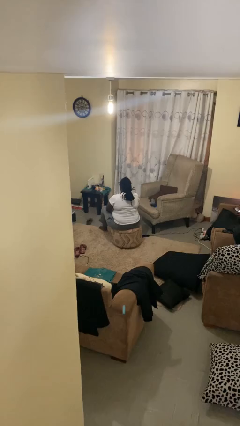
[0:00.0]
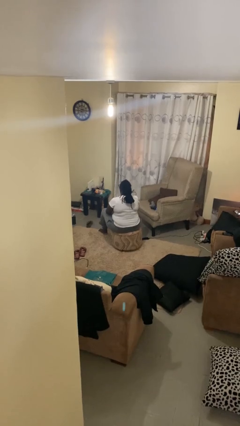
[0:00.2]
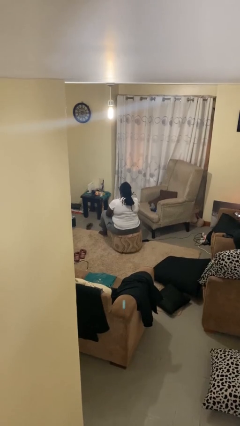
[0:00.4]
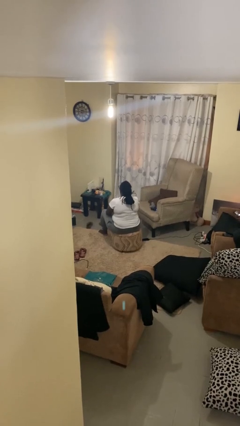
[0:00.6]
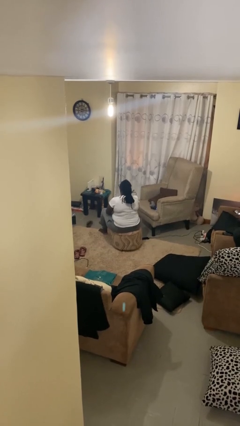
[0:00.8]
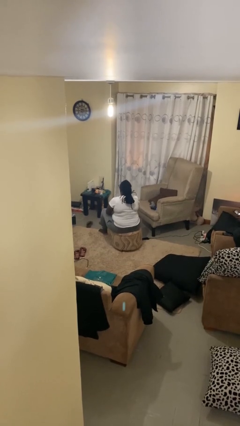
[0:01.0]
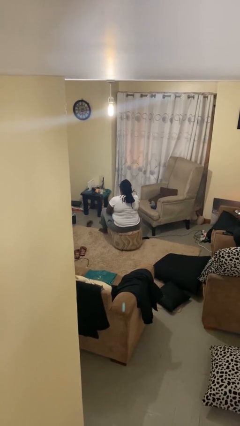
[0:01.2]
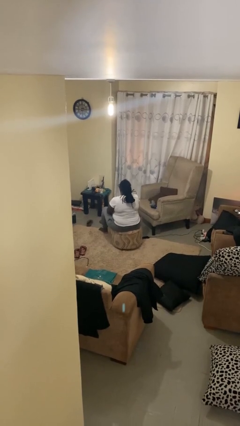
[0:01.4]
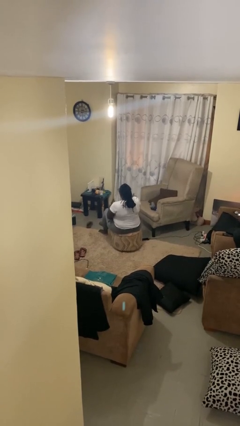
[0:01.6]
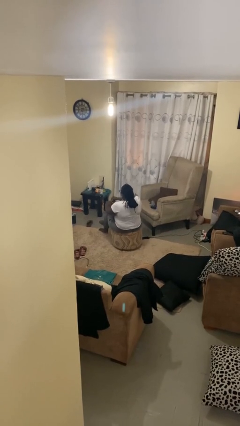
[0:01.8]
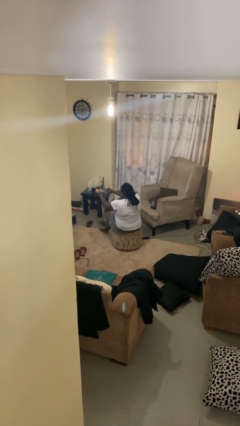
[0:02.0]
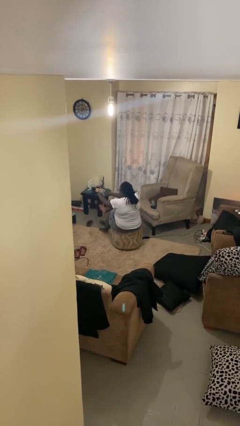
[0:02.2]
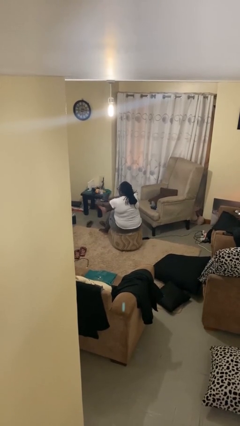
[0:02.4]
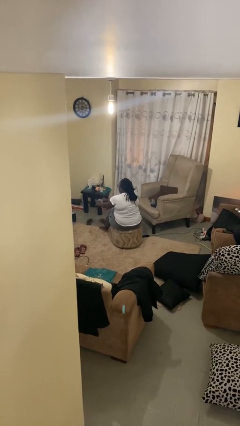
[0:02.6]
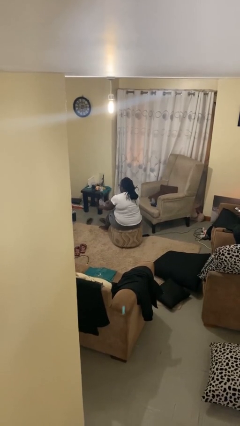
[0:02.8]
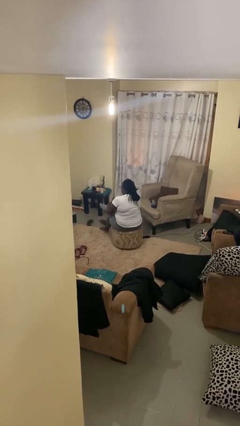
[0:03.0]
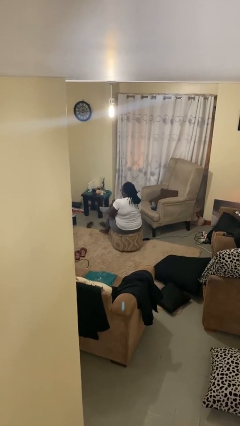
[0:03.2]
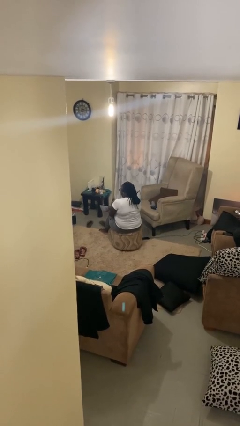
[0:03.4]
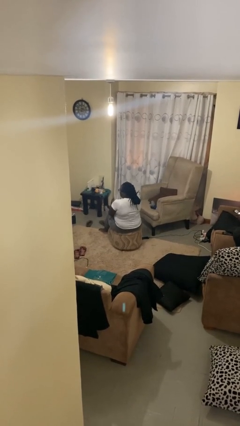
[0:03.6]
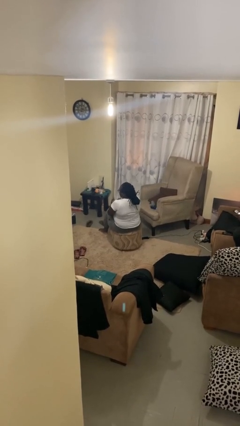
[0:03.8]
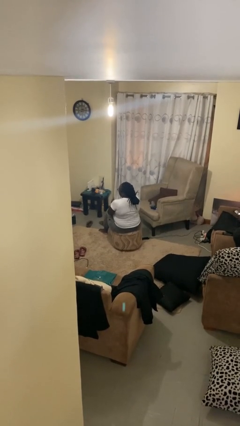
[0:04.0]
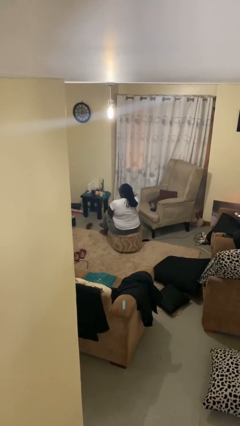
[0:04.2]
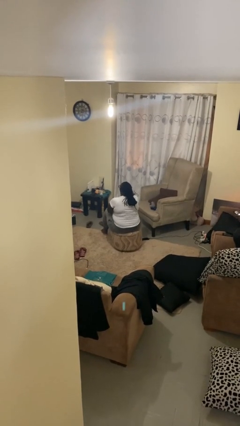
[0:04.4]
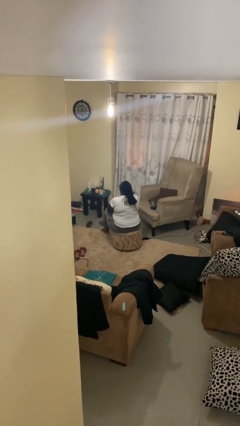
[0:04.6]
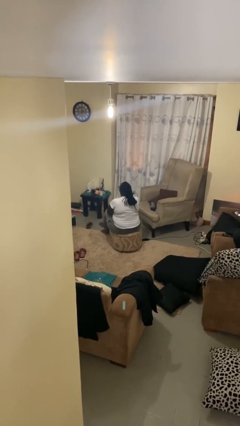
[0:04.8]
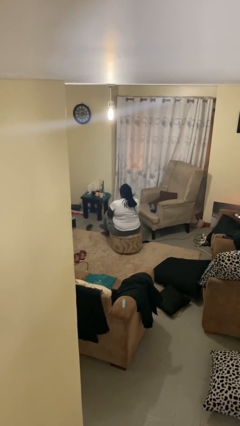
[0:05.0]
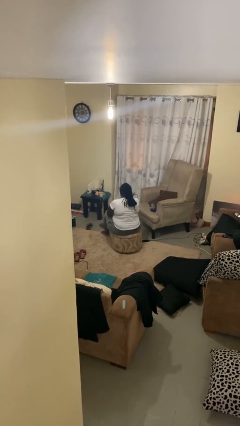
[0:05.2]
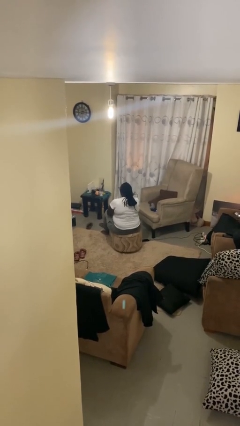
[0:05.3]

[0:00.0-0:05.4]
person puts on socks

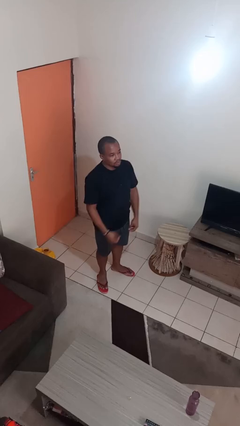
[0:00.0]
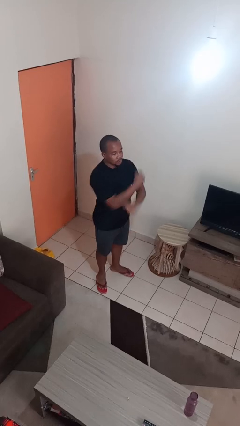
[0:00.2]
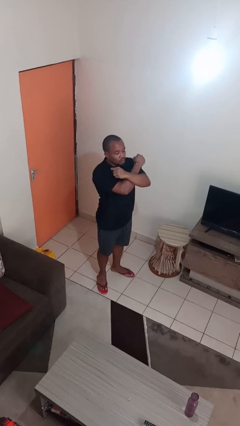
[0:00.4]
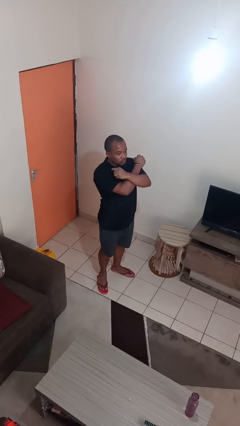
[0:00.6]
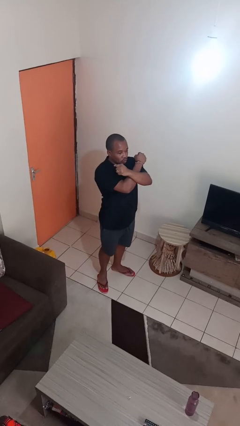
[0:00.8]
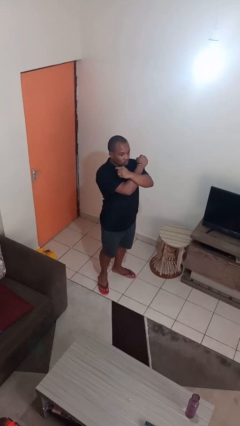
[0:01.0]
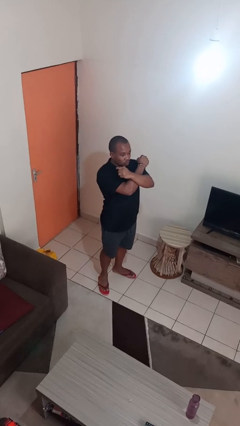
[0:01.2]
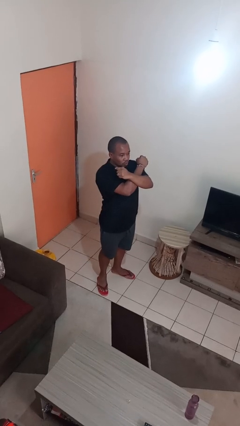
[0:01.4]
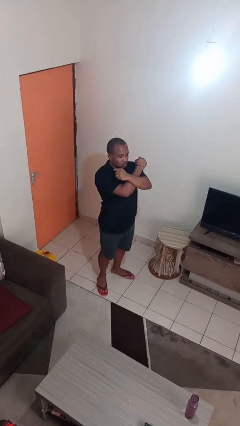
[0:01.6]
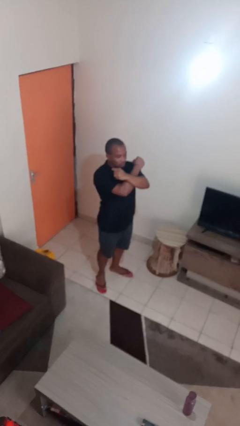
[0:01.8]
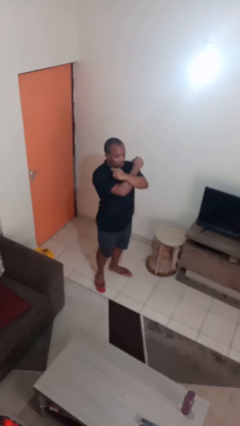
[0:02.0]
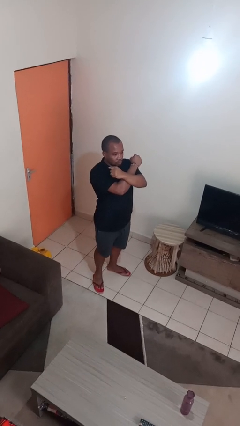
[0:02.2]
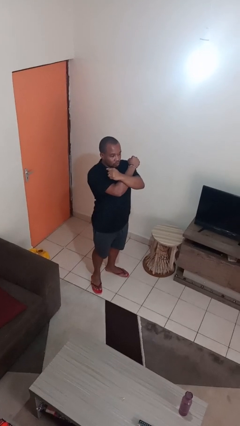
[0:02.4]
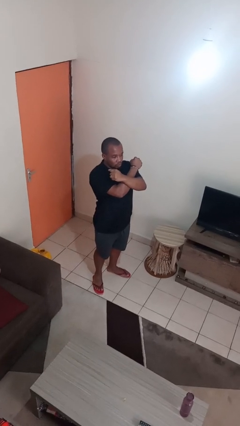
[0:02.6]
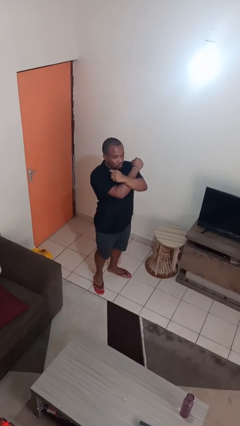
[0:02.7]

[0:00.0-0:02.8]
person gestures arms x

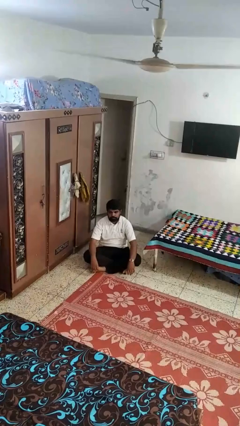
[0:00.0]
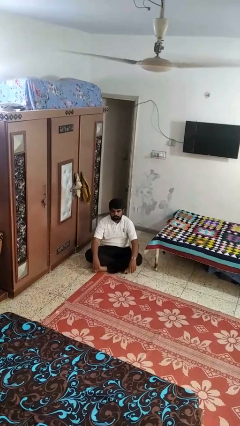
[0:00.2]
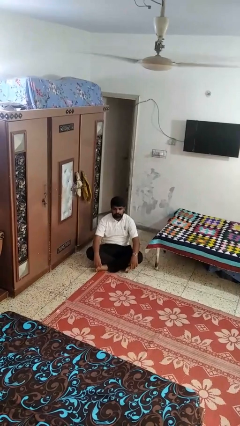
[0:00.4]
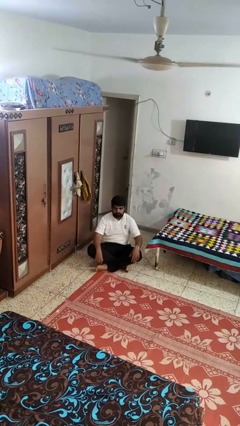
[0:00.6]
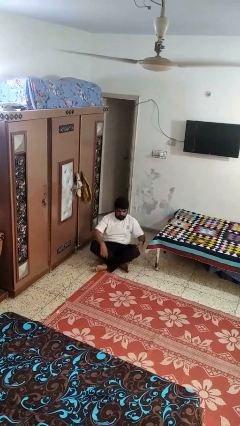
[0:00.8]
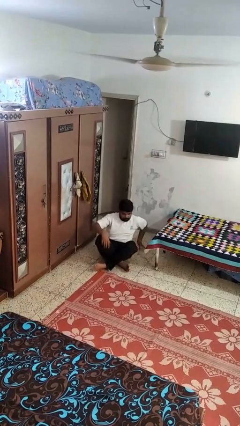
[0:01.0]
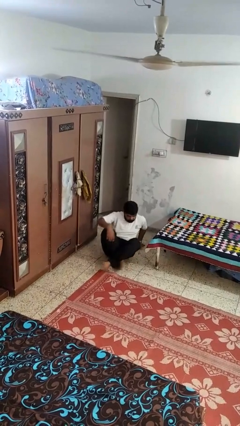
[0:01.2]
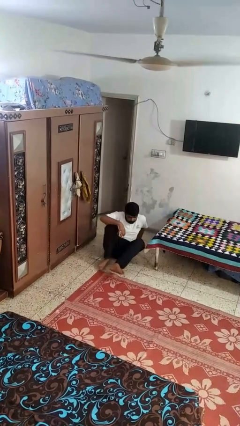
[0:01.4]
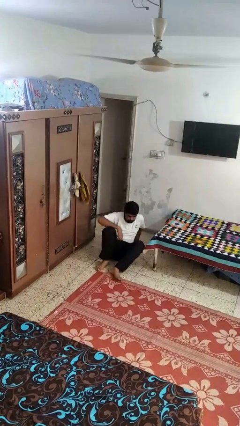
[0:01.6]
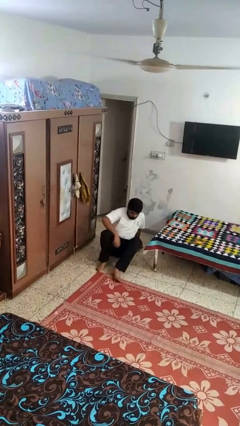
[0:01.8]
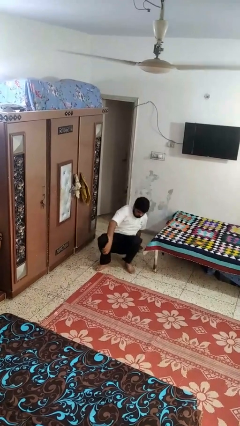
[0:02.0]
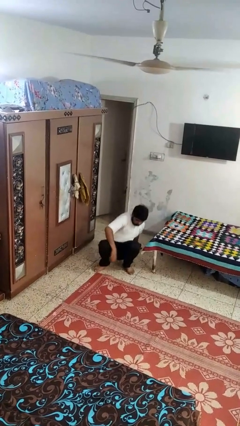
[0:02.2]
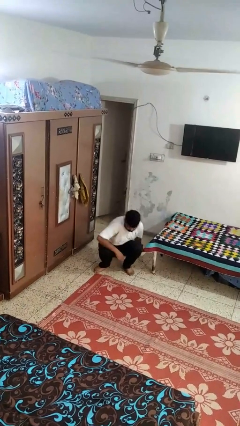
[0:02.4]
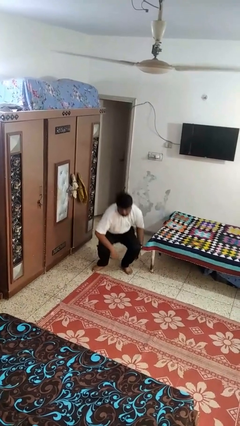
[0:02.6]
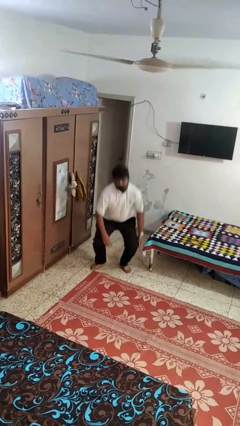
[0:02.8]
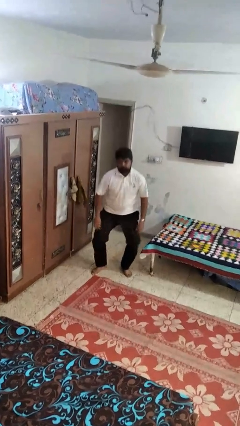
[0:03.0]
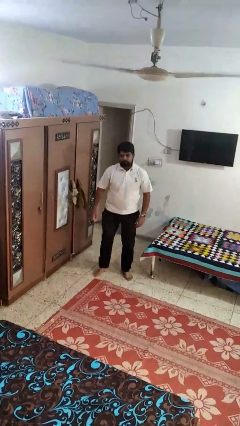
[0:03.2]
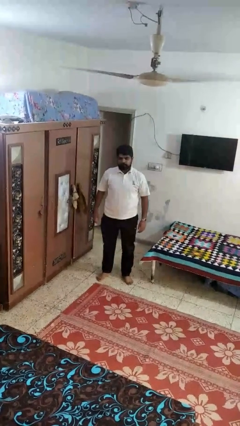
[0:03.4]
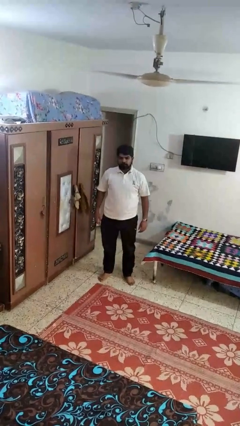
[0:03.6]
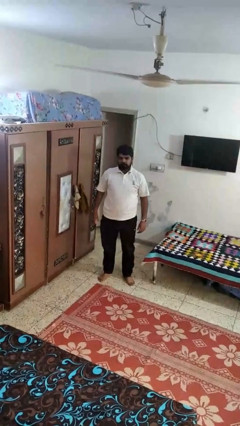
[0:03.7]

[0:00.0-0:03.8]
person stands up from floor

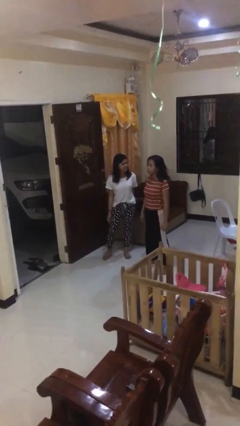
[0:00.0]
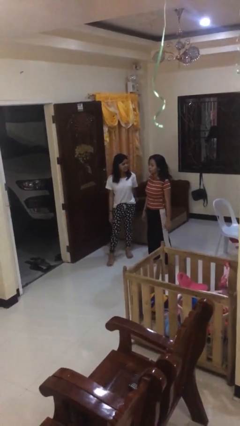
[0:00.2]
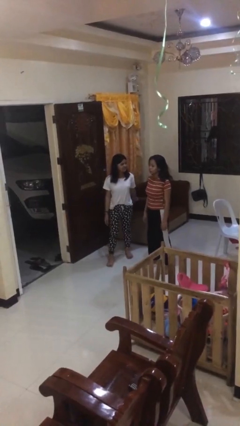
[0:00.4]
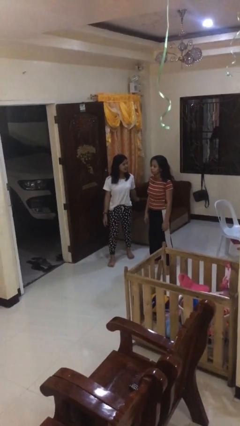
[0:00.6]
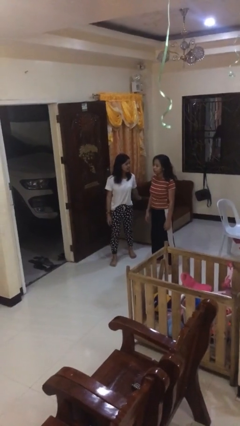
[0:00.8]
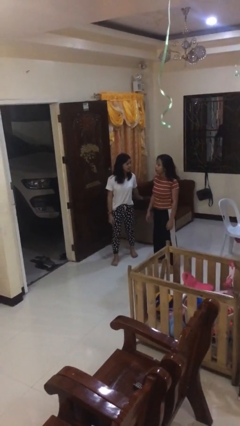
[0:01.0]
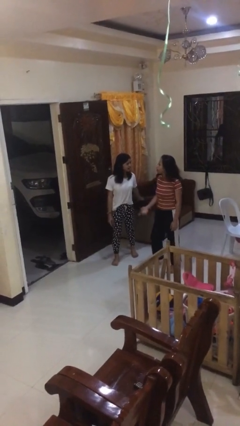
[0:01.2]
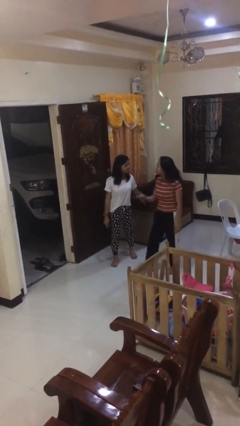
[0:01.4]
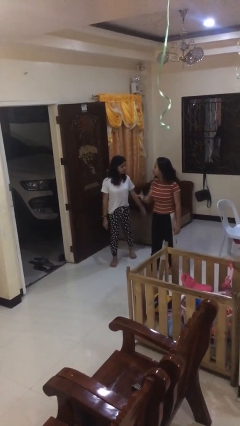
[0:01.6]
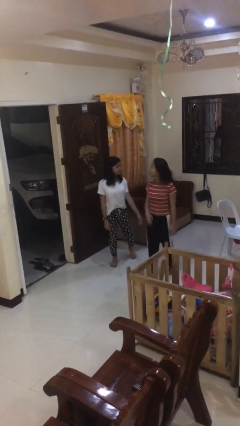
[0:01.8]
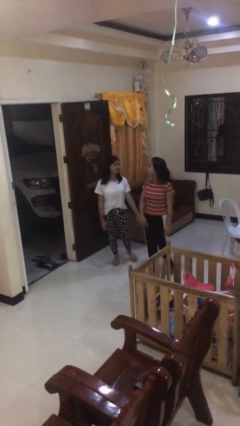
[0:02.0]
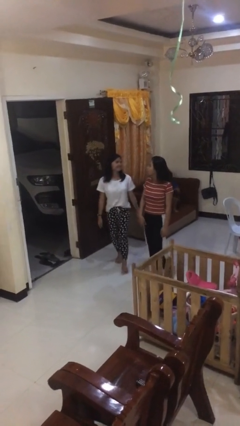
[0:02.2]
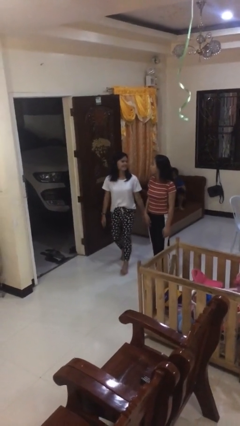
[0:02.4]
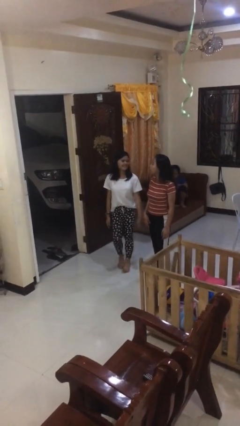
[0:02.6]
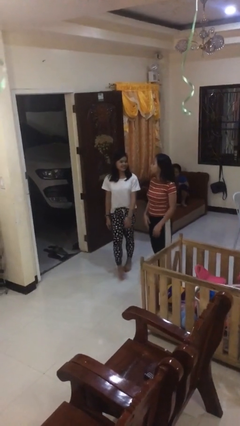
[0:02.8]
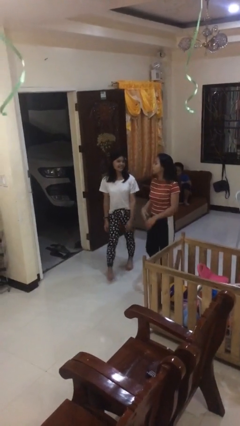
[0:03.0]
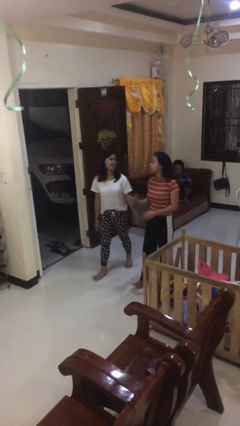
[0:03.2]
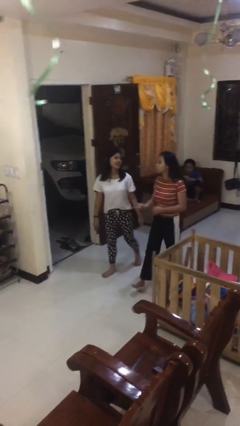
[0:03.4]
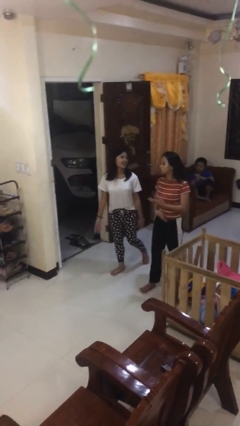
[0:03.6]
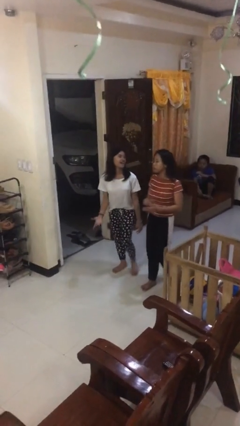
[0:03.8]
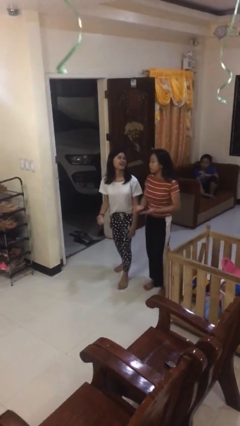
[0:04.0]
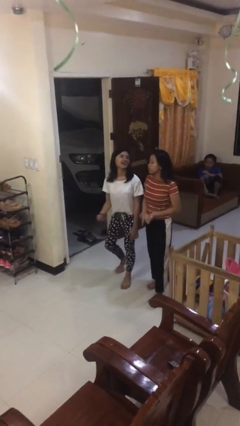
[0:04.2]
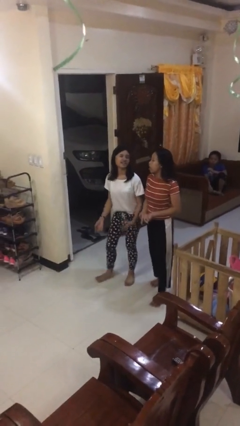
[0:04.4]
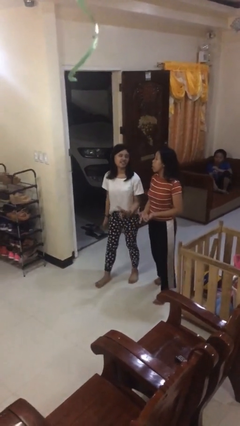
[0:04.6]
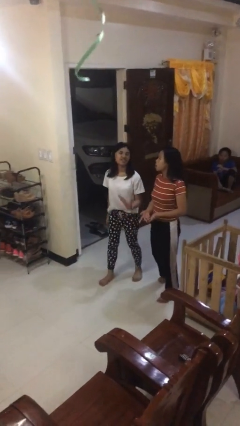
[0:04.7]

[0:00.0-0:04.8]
person talks to person

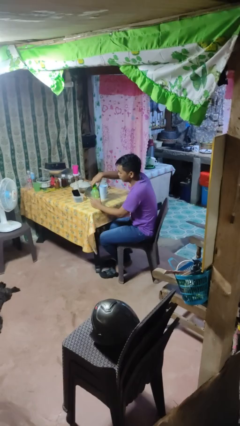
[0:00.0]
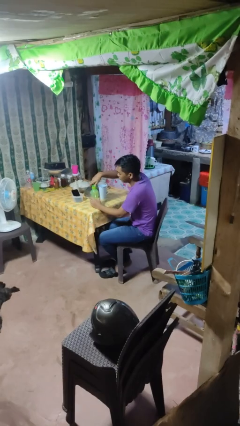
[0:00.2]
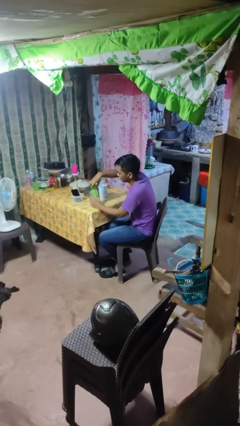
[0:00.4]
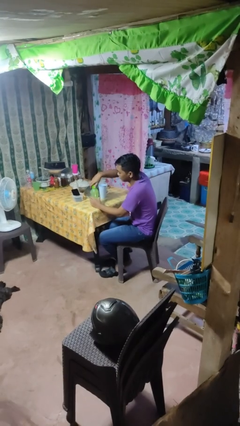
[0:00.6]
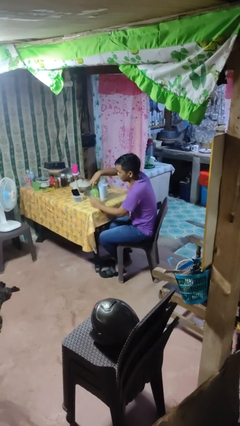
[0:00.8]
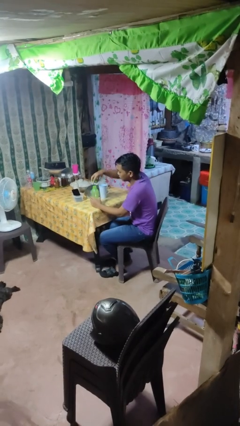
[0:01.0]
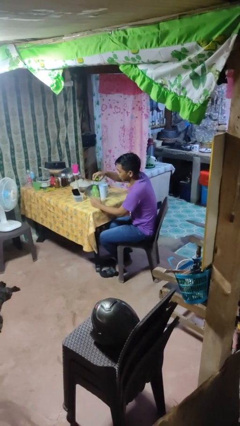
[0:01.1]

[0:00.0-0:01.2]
person unscrews lid from bottle
